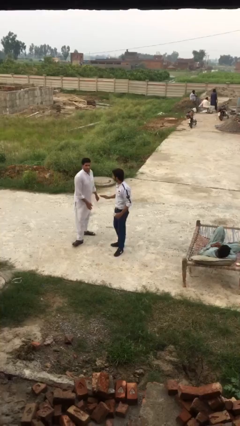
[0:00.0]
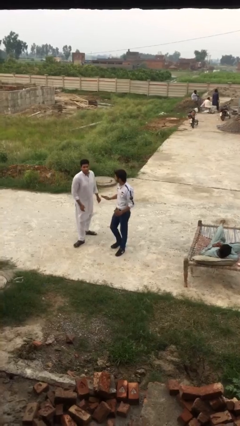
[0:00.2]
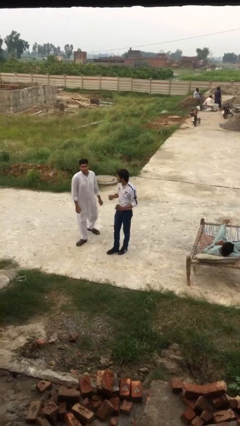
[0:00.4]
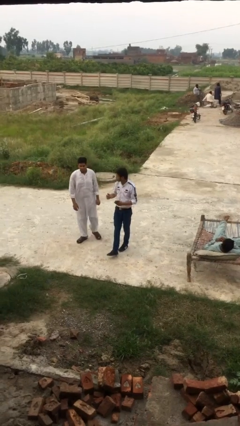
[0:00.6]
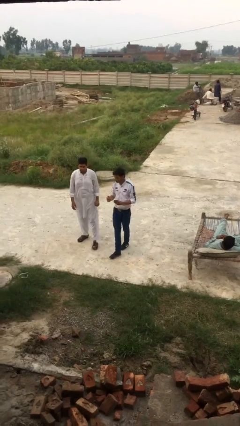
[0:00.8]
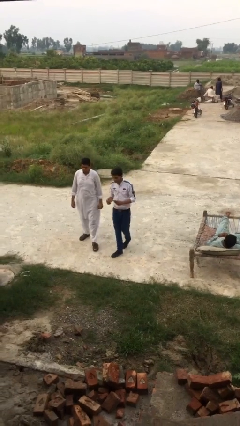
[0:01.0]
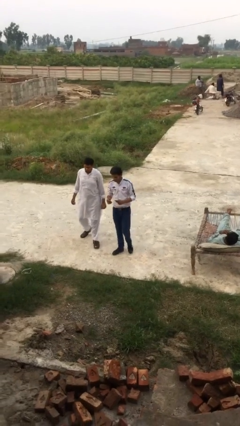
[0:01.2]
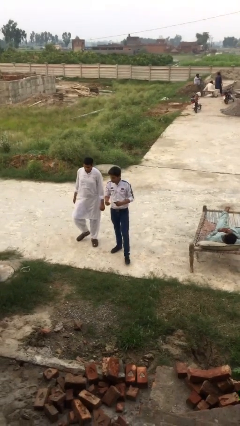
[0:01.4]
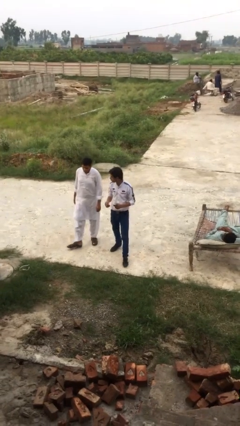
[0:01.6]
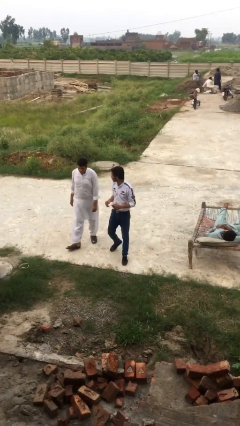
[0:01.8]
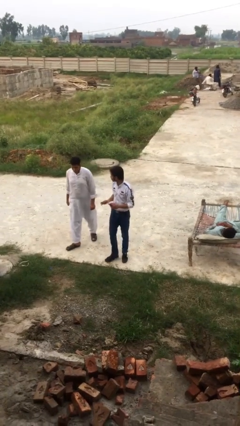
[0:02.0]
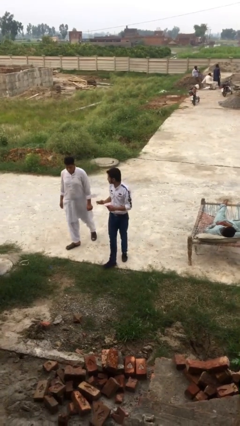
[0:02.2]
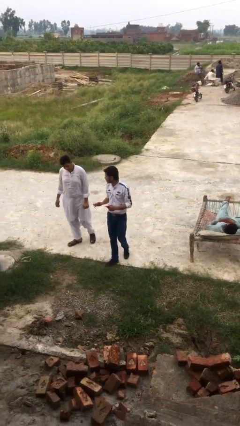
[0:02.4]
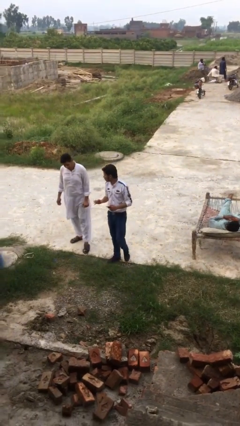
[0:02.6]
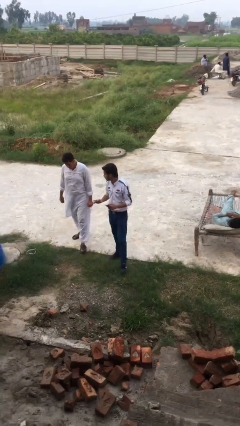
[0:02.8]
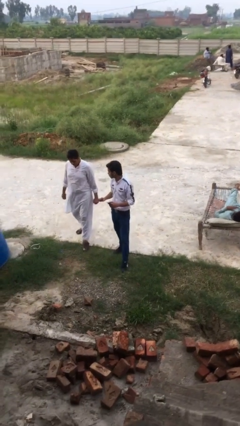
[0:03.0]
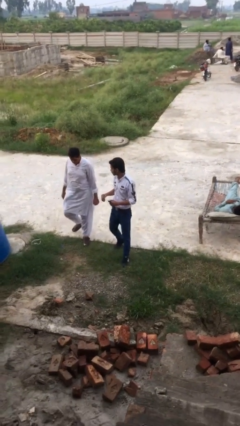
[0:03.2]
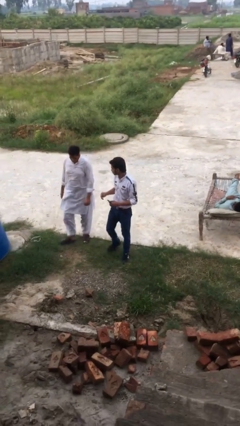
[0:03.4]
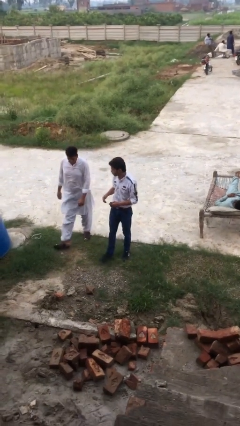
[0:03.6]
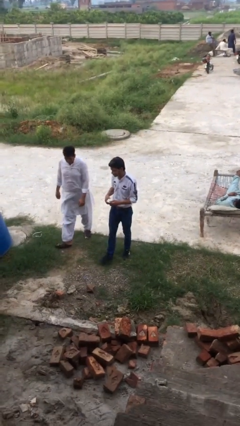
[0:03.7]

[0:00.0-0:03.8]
person talks to person

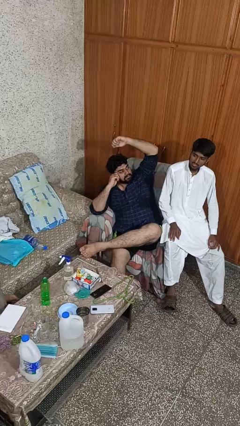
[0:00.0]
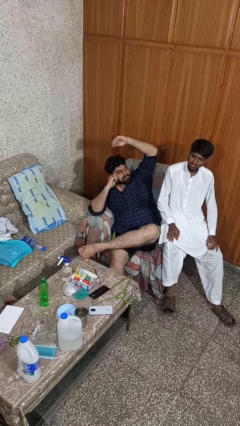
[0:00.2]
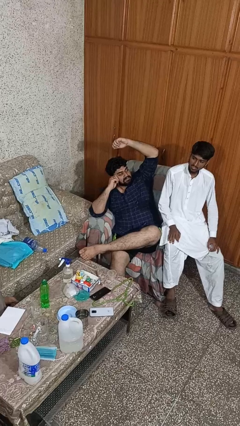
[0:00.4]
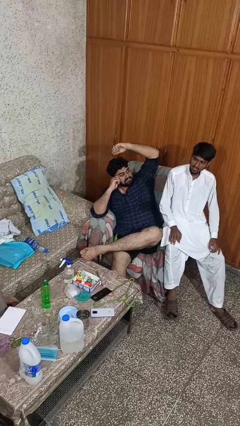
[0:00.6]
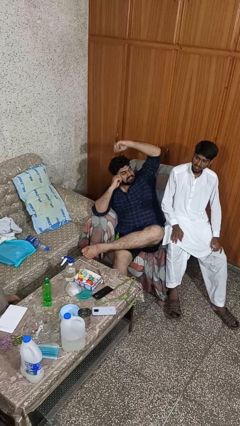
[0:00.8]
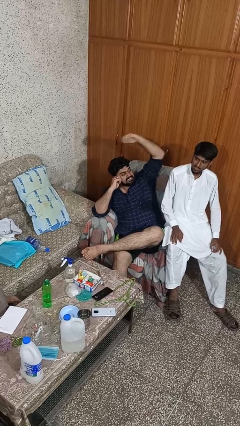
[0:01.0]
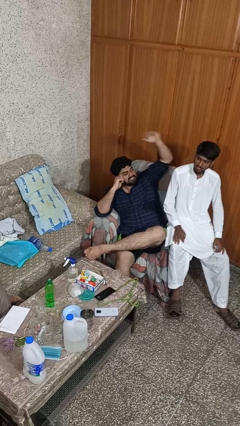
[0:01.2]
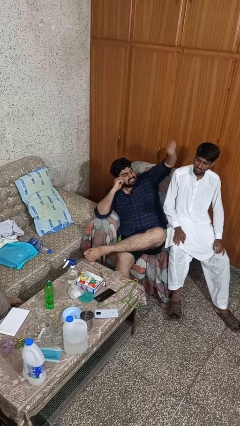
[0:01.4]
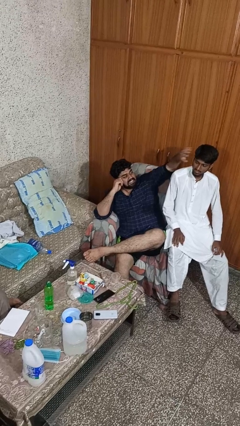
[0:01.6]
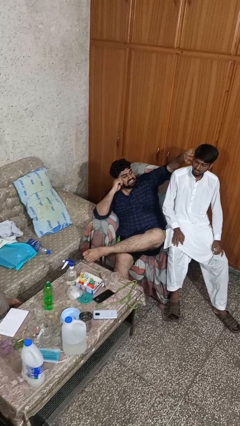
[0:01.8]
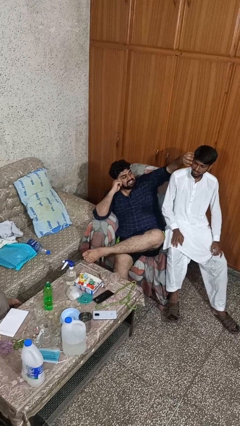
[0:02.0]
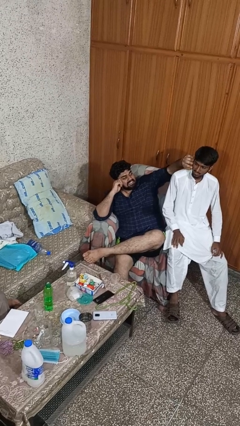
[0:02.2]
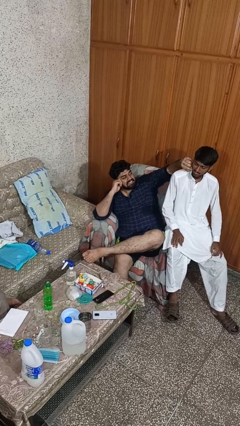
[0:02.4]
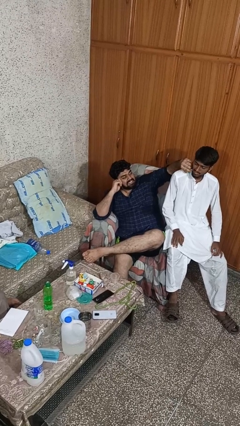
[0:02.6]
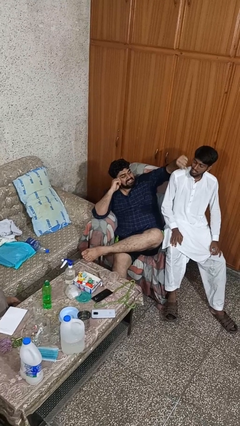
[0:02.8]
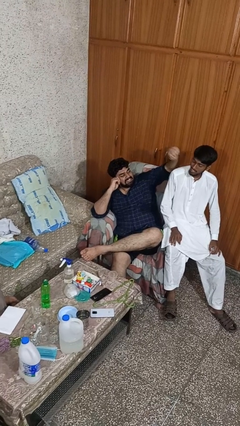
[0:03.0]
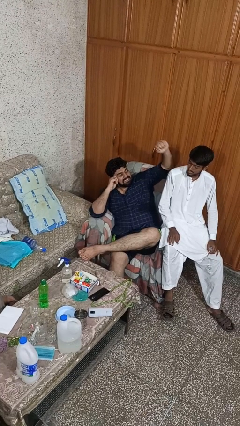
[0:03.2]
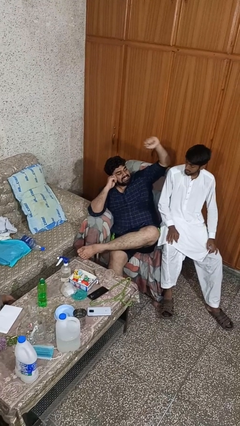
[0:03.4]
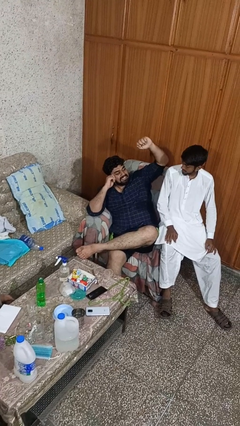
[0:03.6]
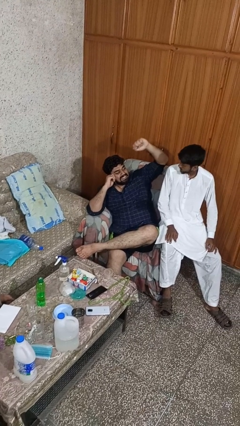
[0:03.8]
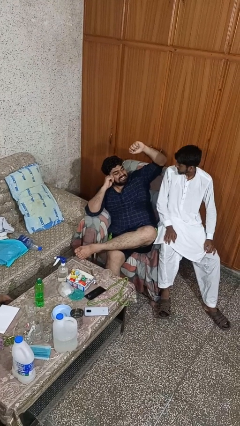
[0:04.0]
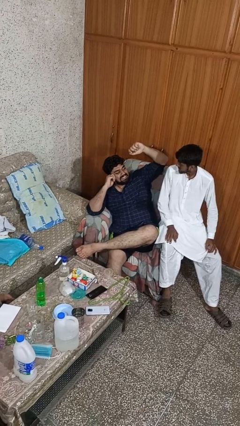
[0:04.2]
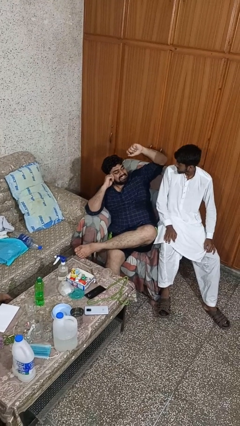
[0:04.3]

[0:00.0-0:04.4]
person touches face of person

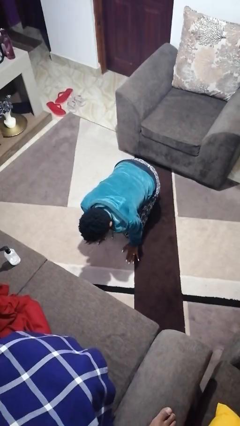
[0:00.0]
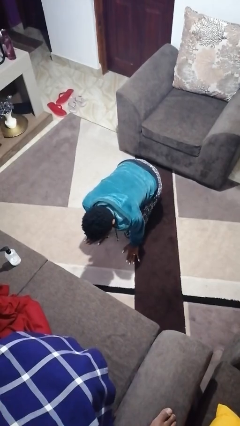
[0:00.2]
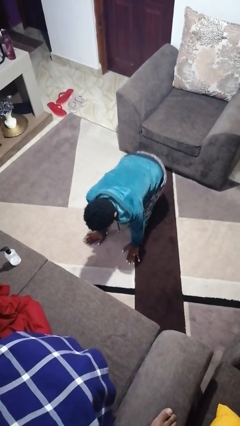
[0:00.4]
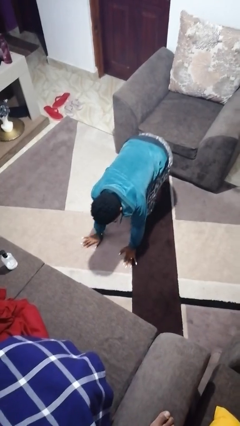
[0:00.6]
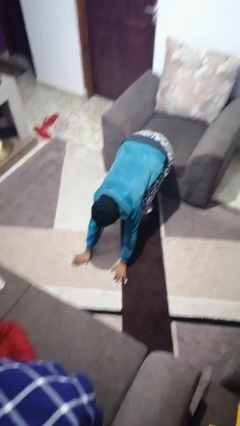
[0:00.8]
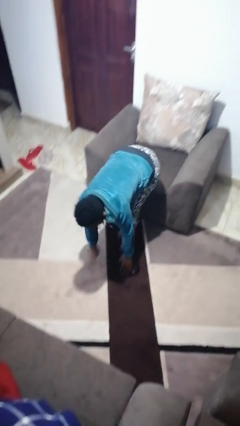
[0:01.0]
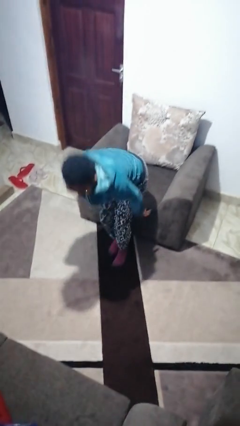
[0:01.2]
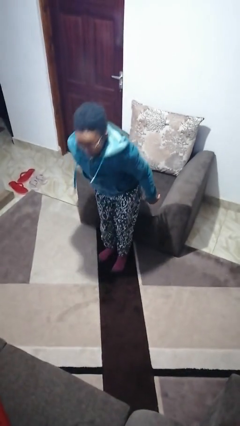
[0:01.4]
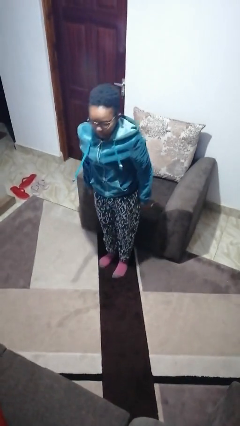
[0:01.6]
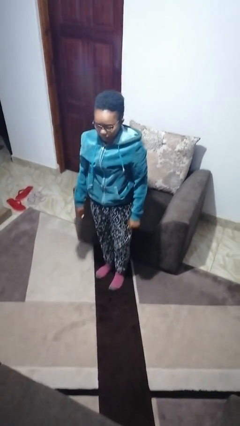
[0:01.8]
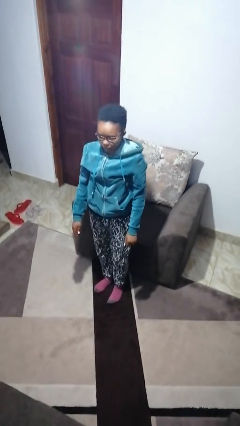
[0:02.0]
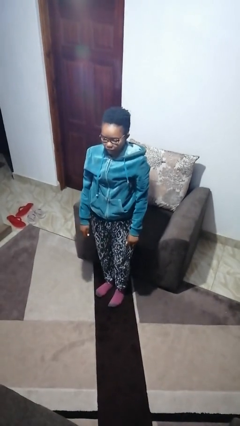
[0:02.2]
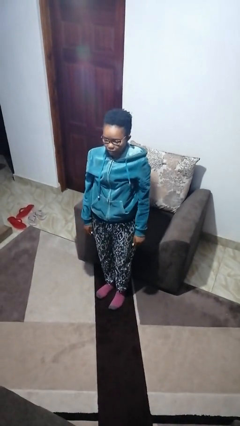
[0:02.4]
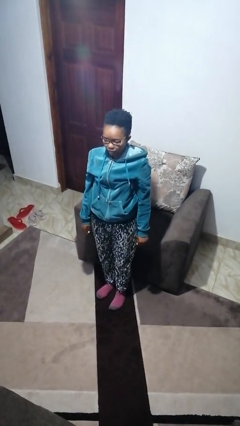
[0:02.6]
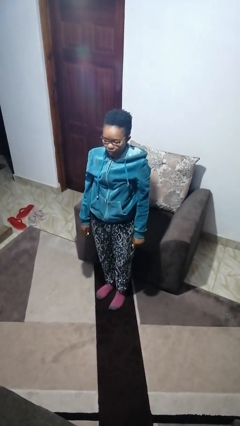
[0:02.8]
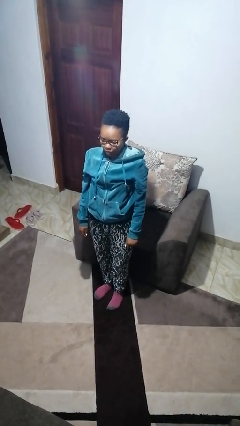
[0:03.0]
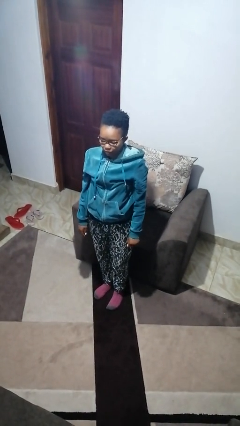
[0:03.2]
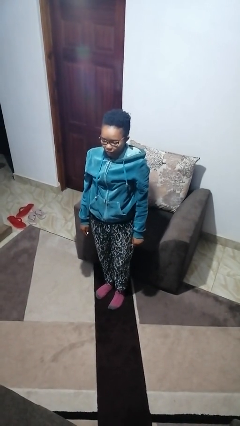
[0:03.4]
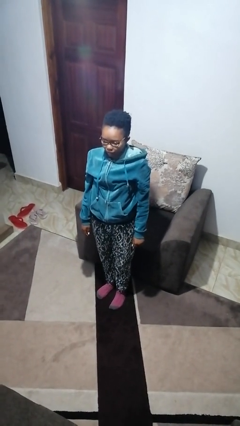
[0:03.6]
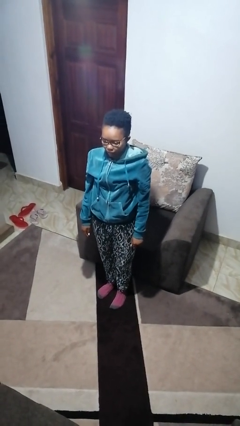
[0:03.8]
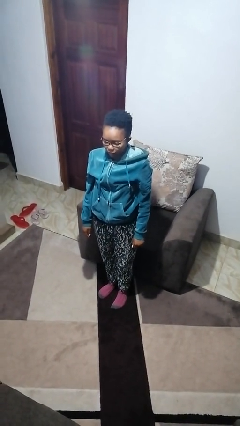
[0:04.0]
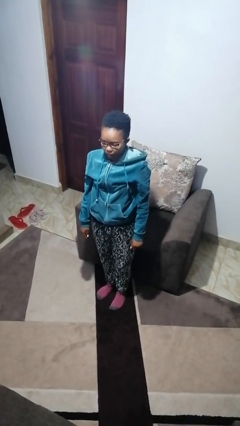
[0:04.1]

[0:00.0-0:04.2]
person stands up from floor

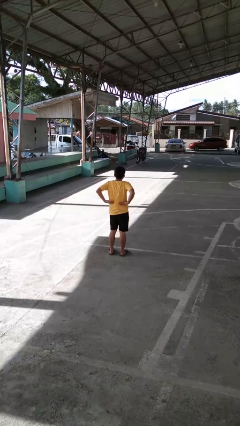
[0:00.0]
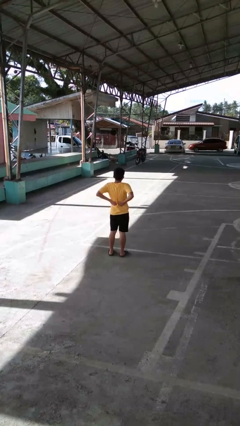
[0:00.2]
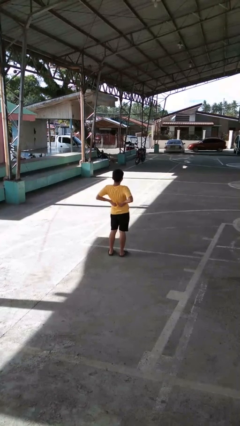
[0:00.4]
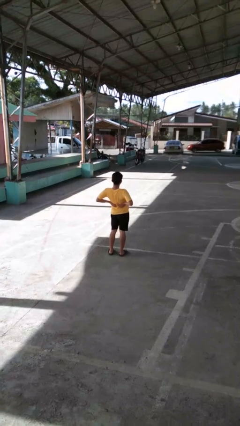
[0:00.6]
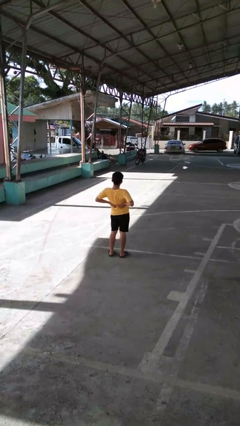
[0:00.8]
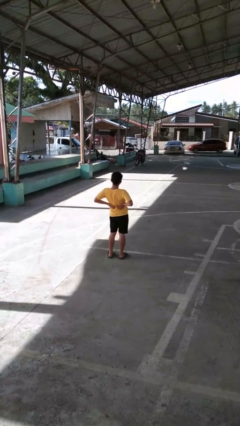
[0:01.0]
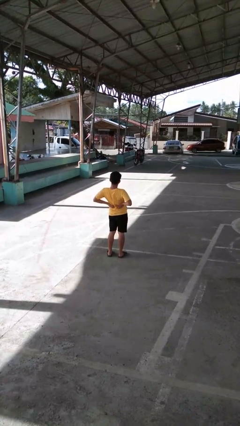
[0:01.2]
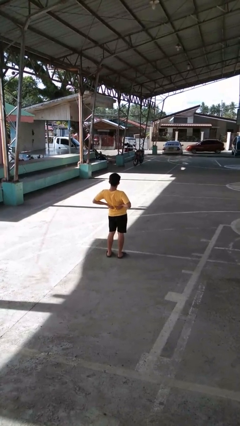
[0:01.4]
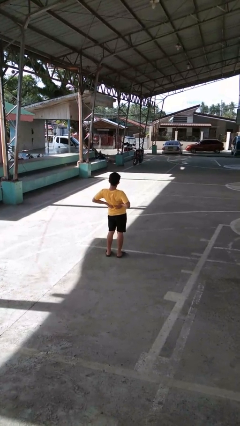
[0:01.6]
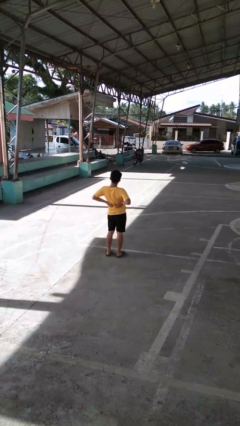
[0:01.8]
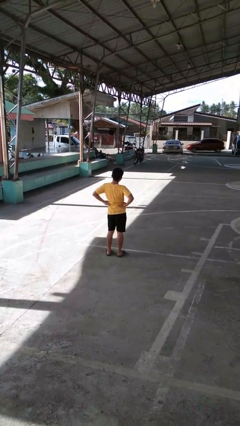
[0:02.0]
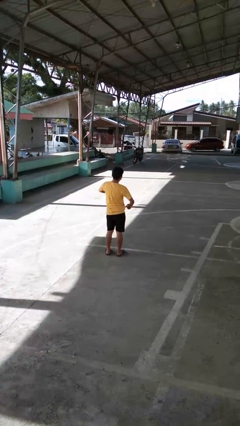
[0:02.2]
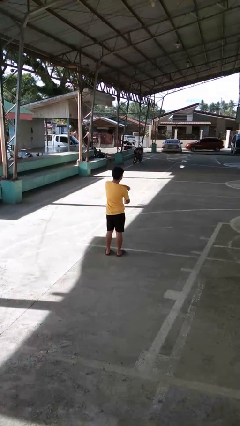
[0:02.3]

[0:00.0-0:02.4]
person stretches back

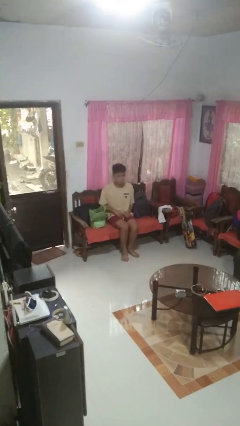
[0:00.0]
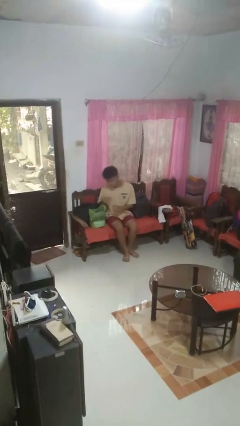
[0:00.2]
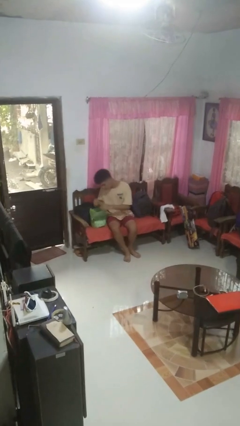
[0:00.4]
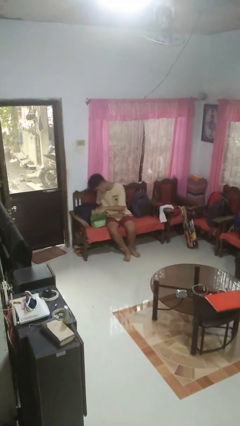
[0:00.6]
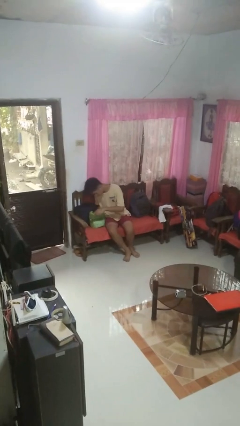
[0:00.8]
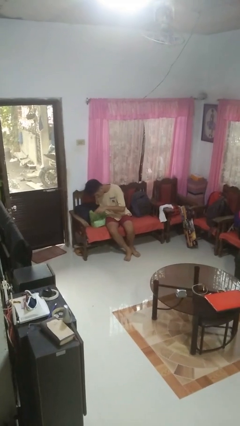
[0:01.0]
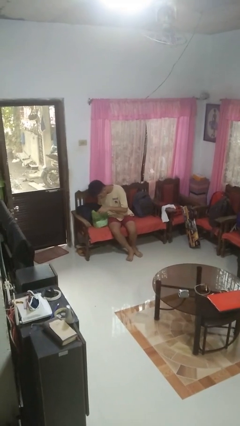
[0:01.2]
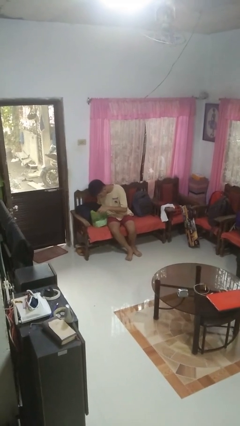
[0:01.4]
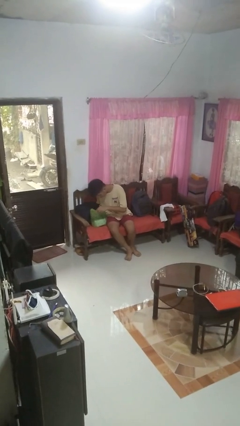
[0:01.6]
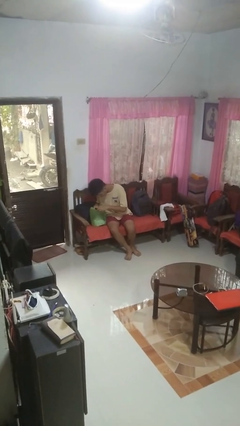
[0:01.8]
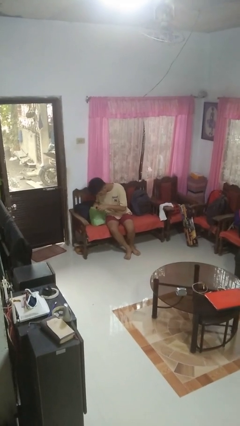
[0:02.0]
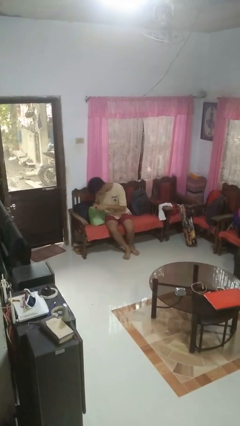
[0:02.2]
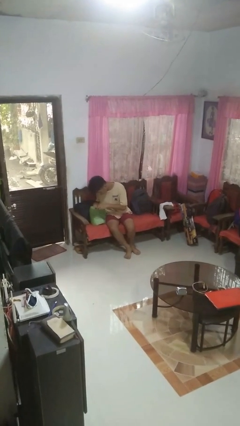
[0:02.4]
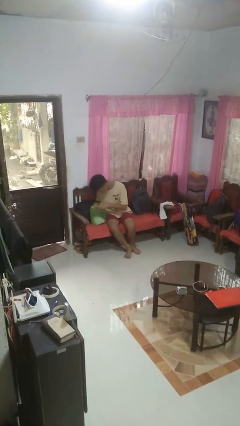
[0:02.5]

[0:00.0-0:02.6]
person searches in bag

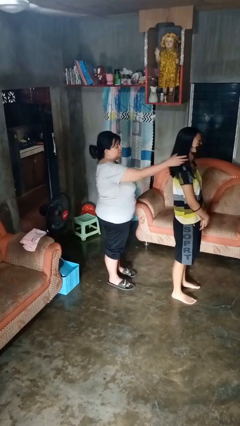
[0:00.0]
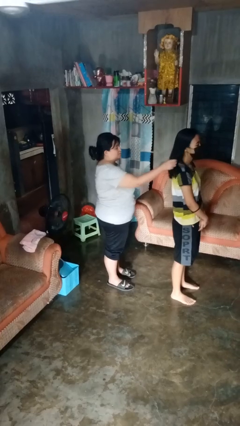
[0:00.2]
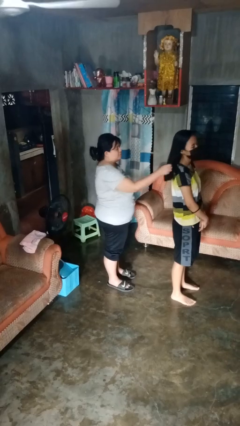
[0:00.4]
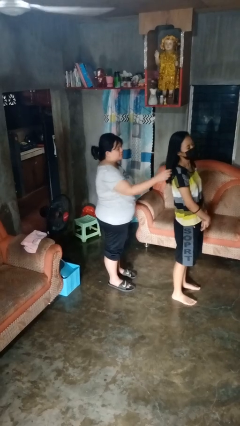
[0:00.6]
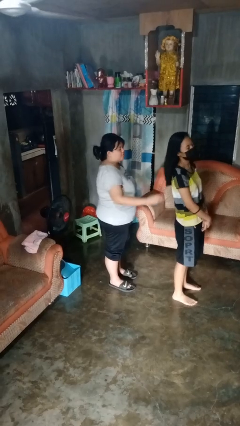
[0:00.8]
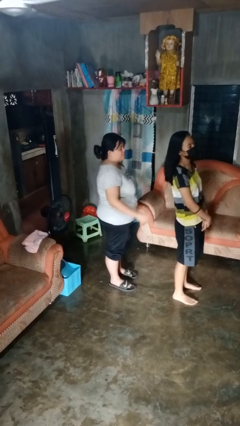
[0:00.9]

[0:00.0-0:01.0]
person grabs person by hair
